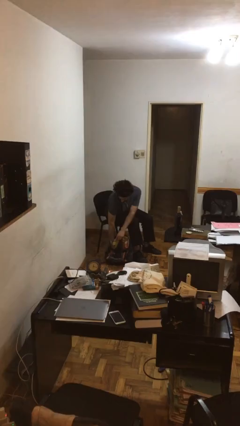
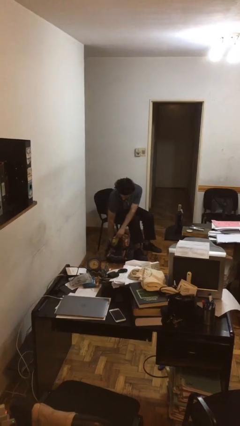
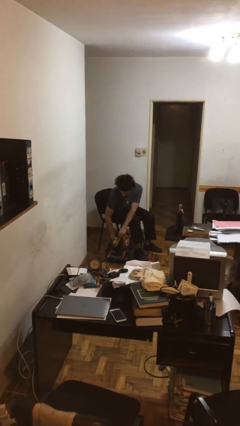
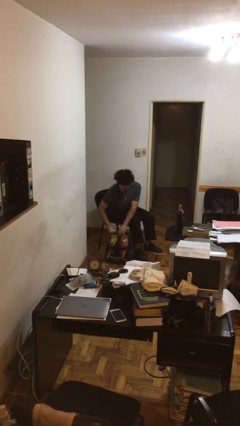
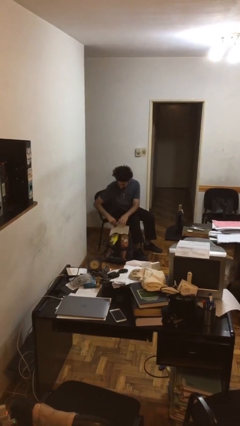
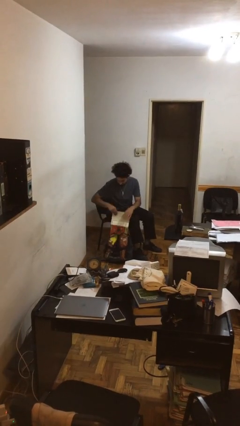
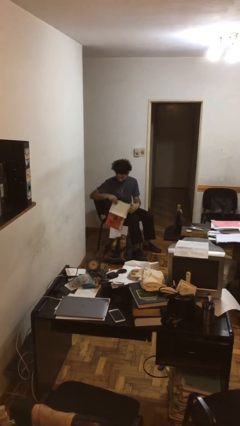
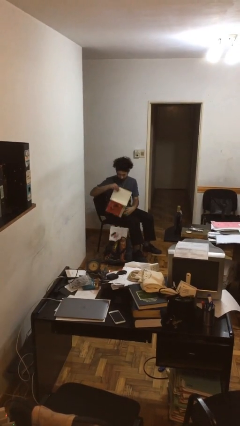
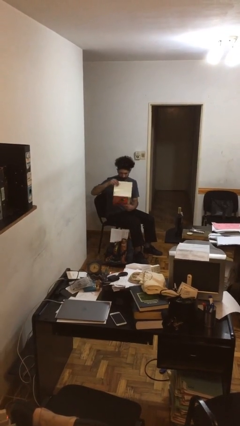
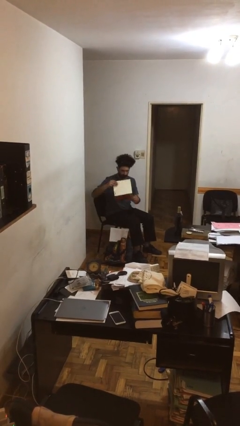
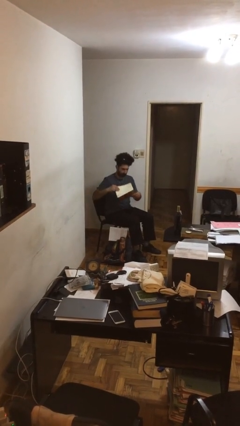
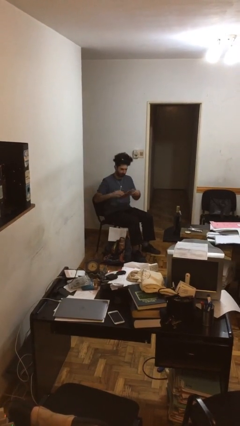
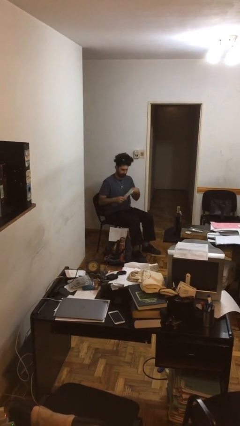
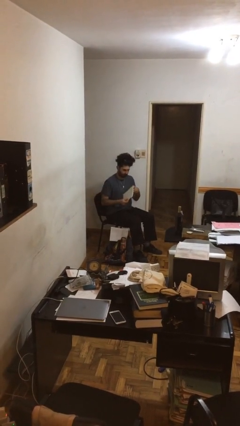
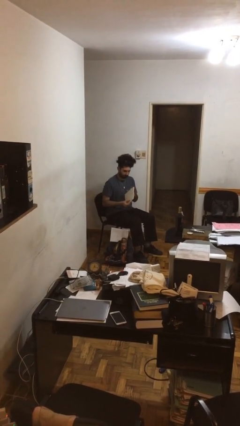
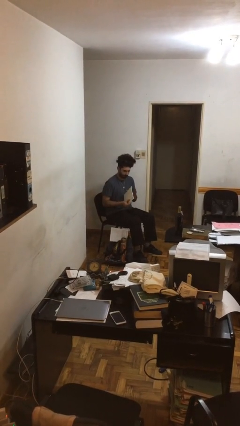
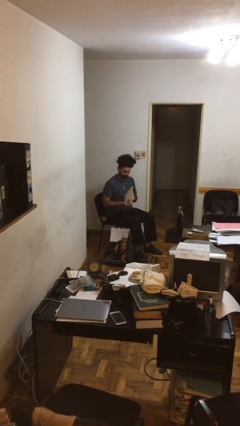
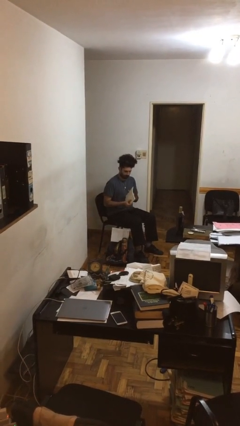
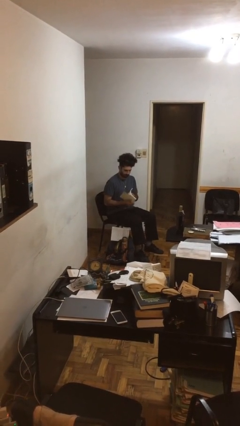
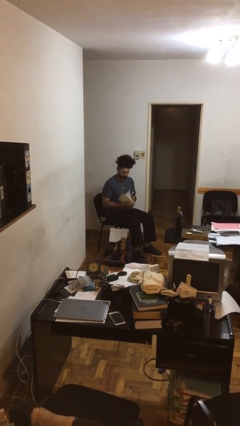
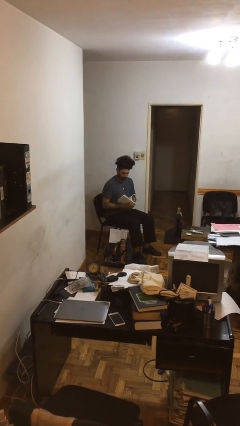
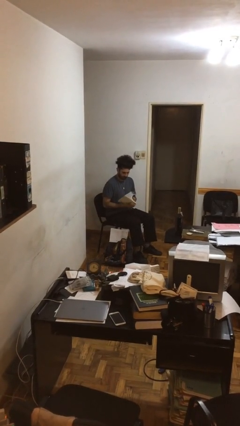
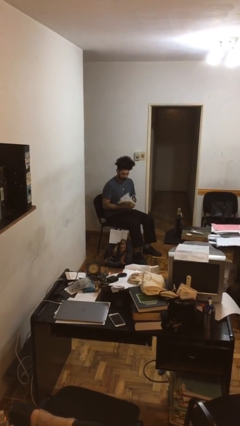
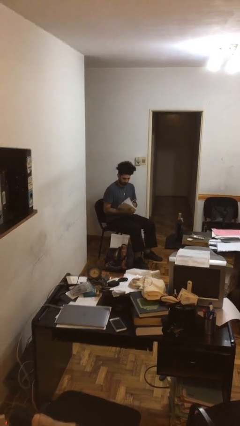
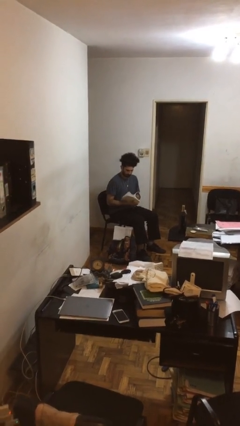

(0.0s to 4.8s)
person takes object from backpack

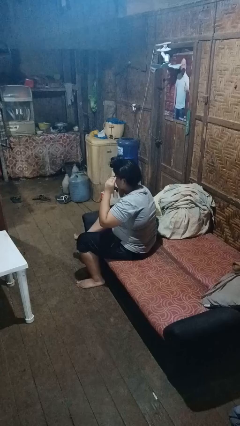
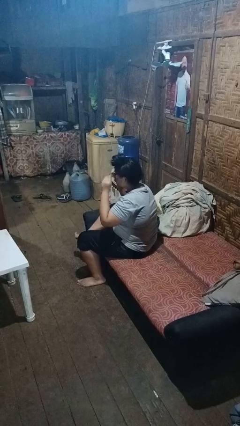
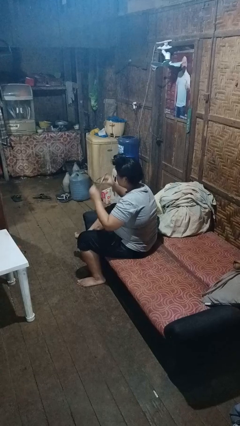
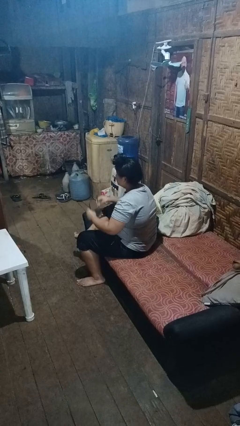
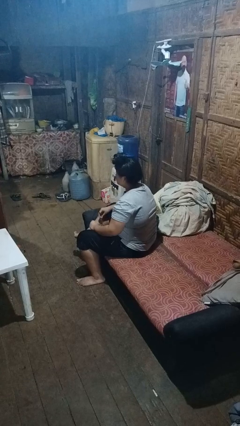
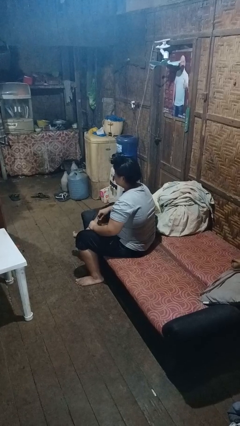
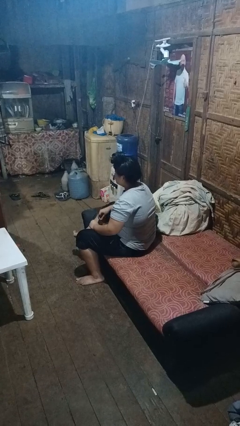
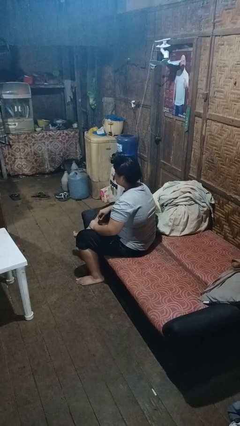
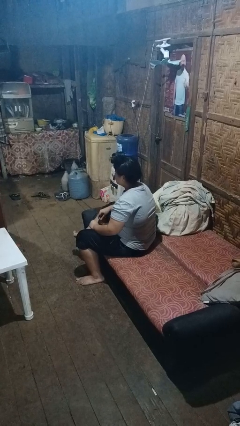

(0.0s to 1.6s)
person takes off glasses

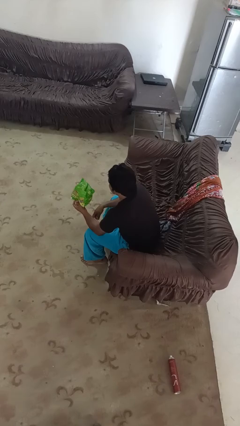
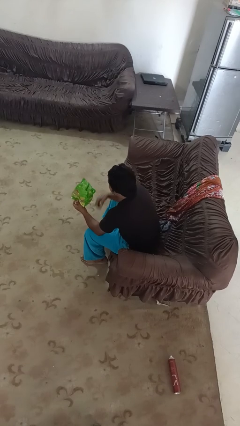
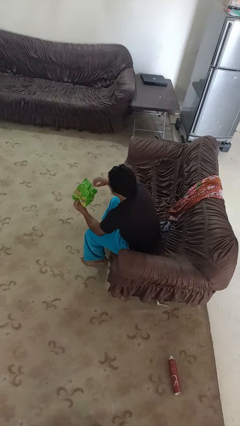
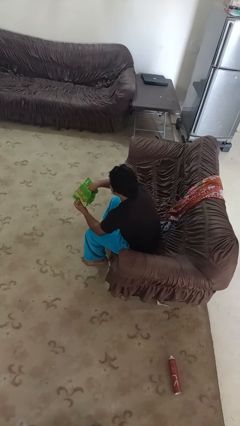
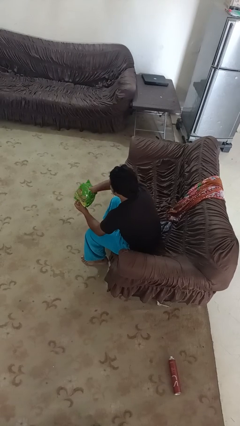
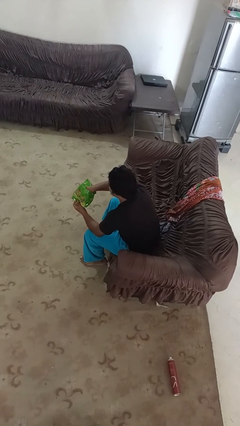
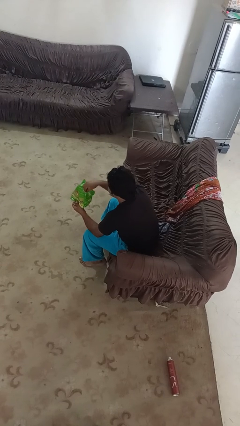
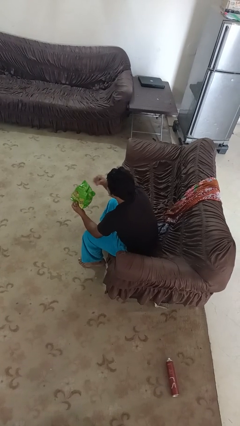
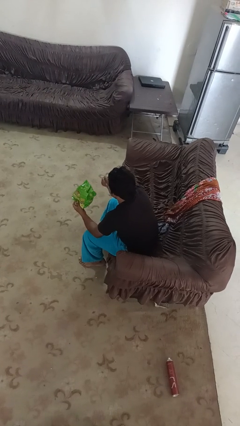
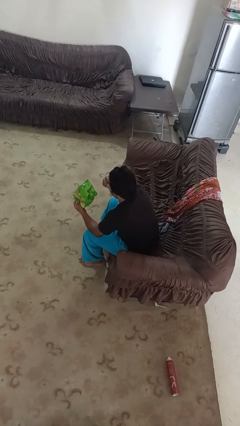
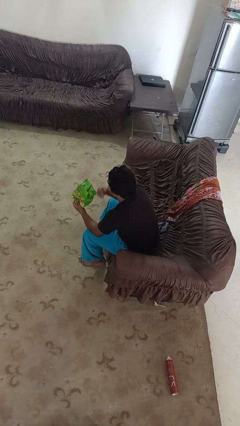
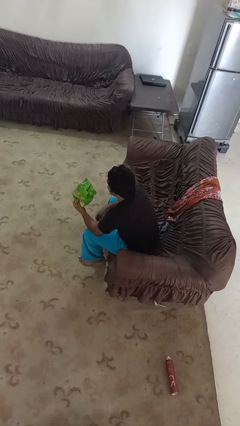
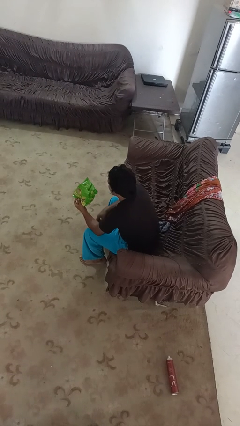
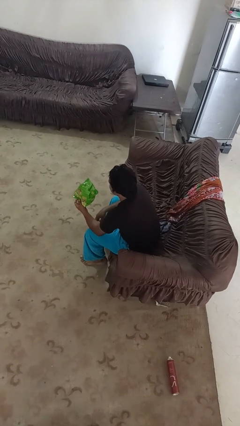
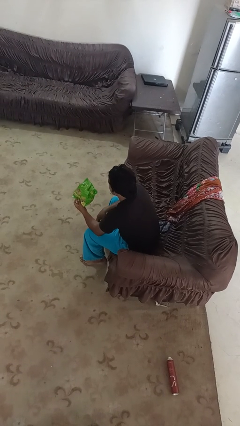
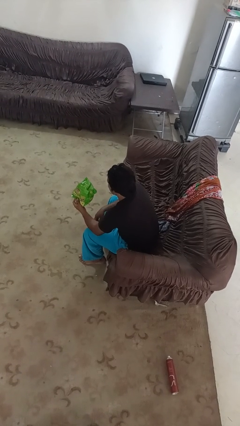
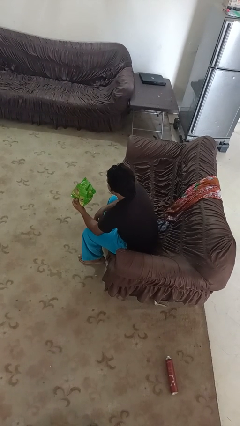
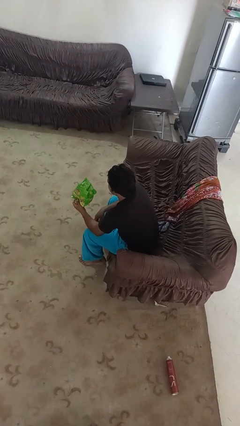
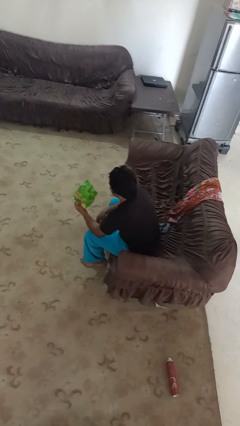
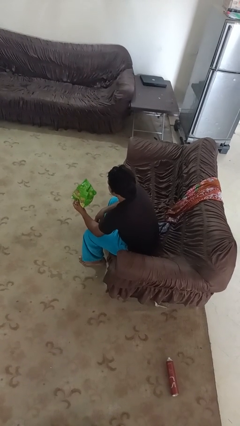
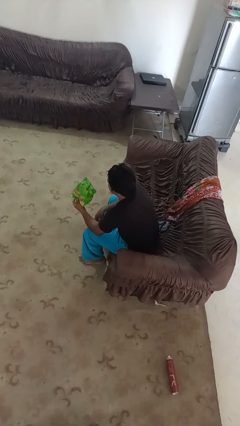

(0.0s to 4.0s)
person eats snack from bag

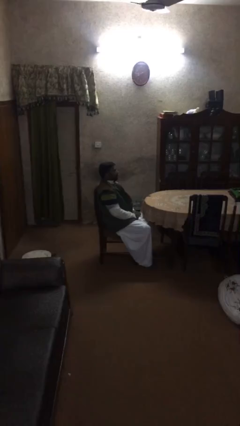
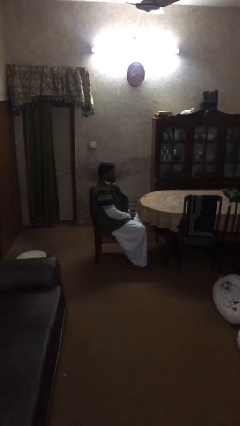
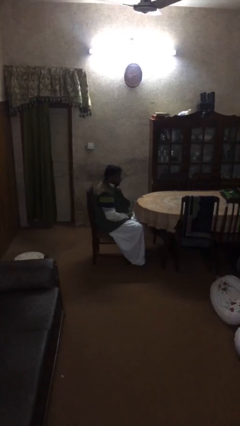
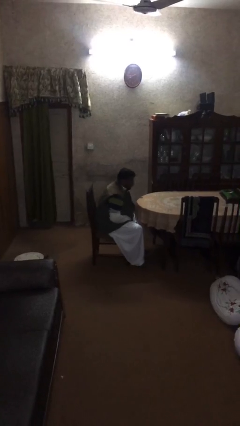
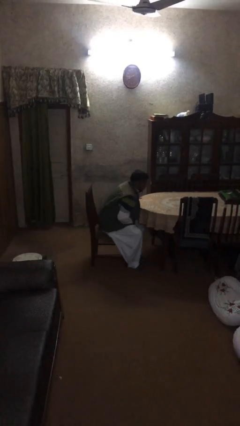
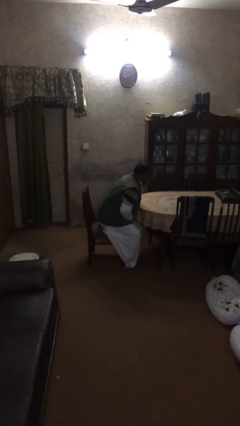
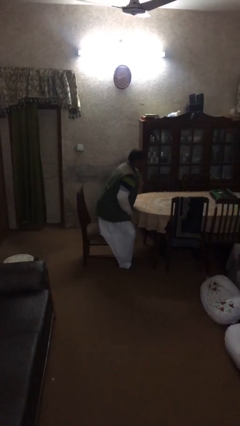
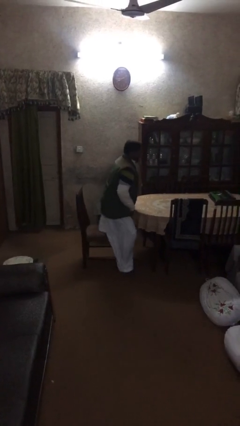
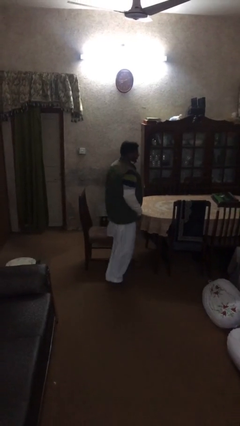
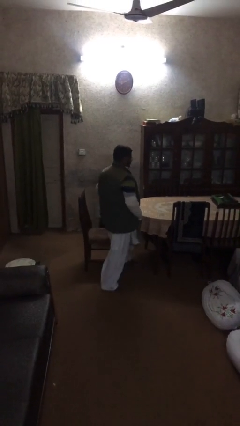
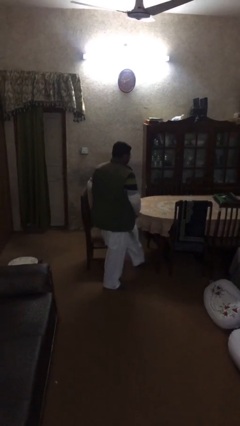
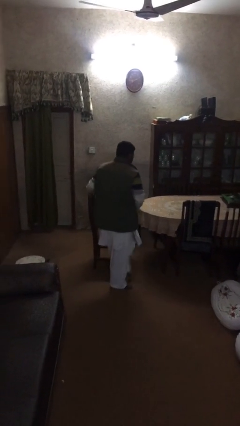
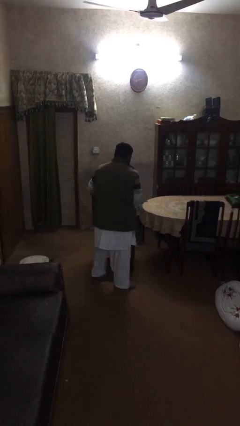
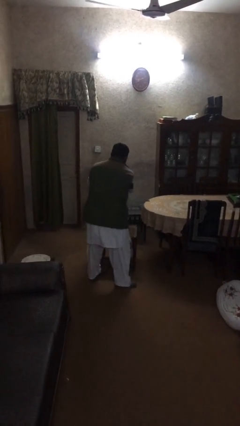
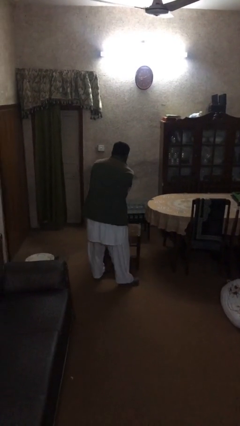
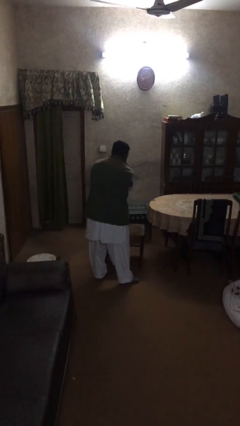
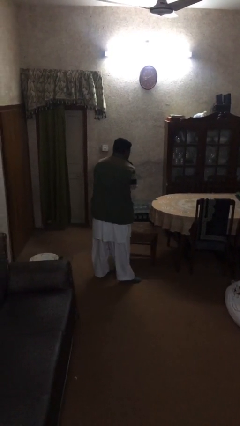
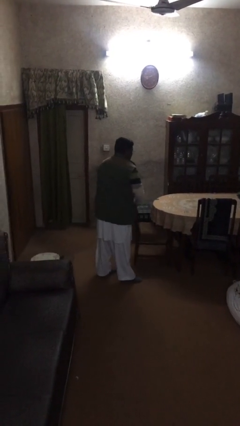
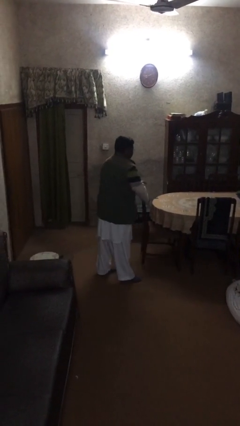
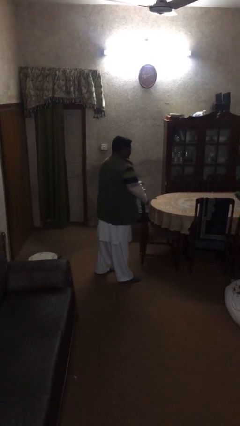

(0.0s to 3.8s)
person stands up

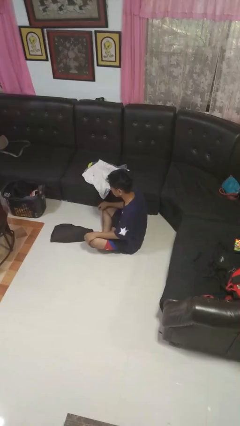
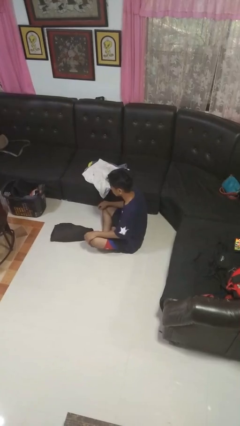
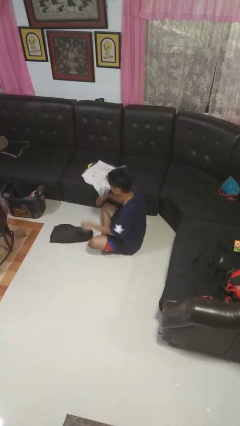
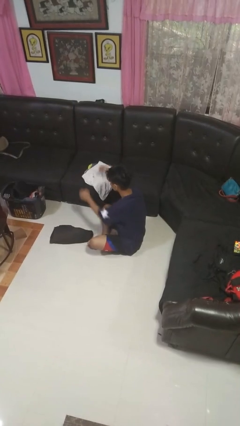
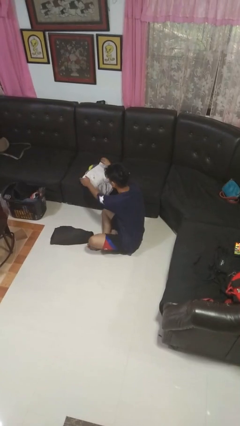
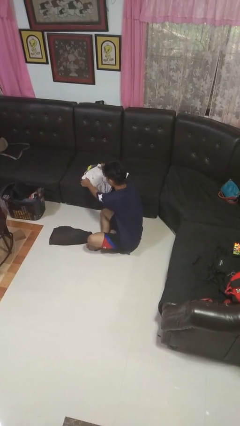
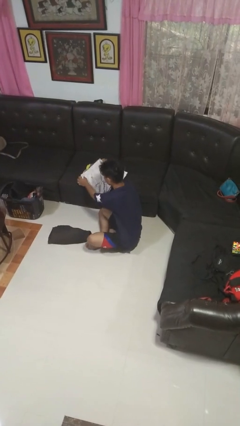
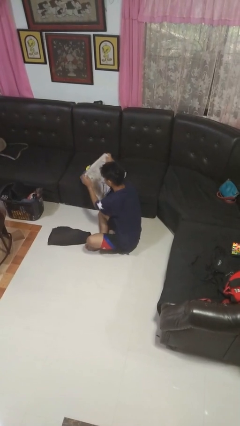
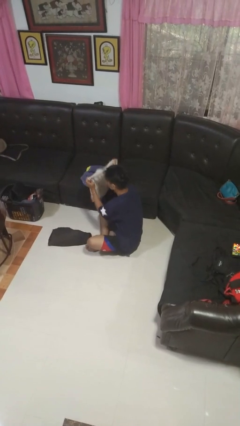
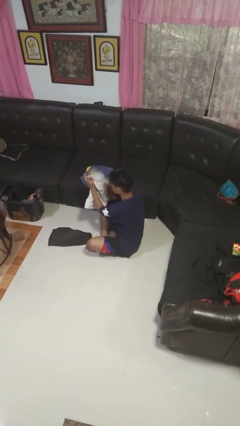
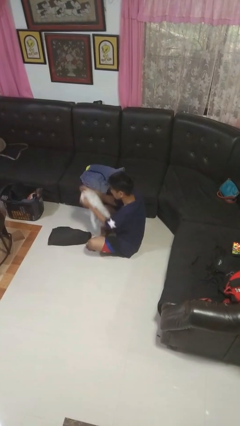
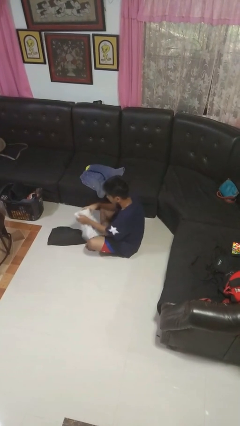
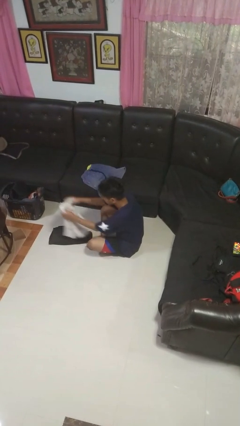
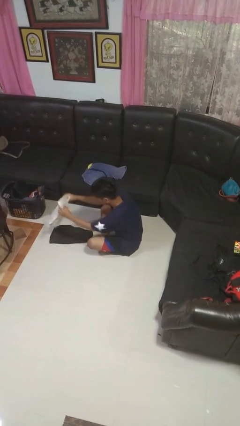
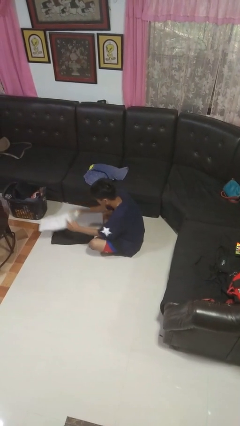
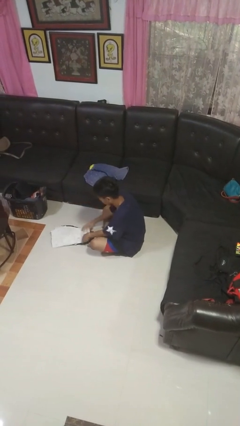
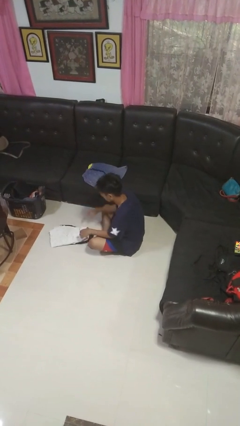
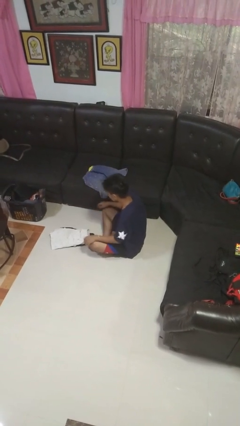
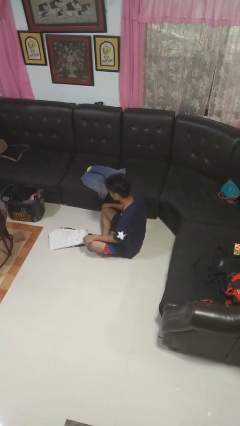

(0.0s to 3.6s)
person folds pants
